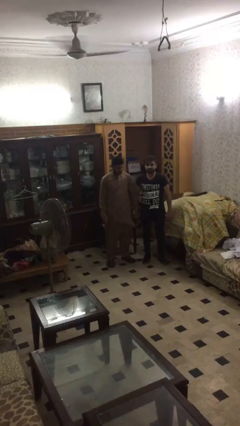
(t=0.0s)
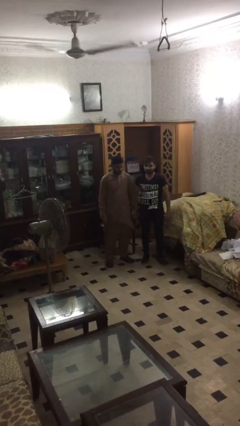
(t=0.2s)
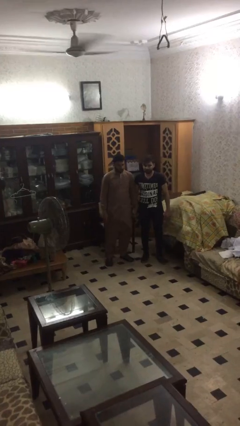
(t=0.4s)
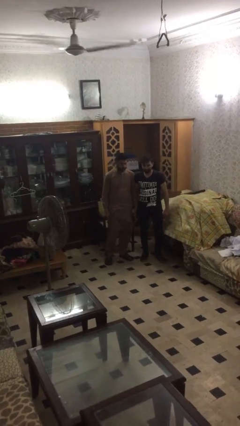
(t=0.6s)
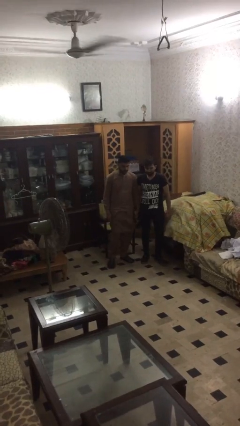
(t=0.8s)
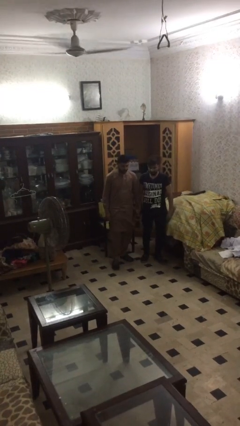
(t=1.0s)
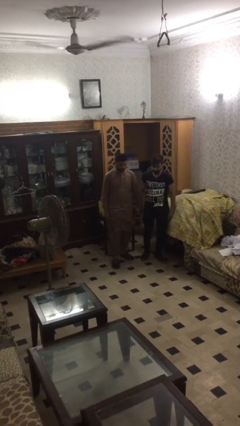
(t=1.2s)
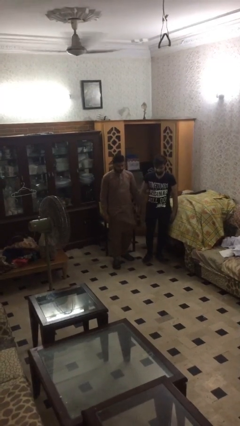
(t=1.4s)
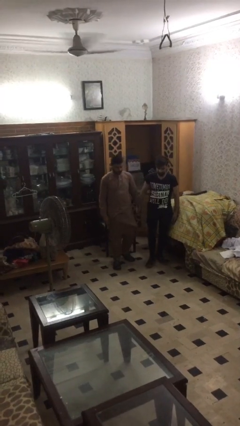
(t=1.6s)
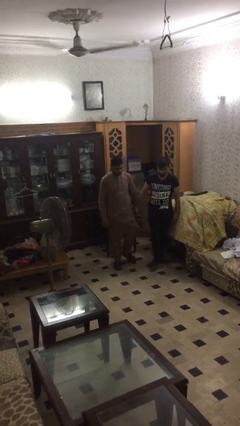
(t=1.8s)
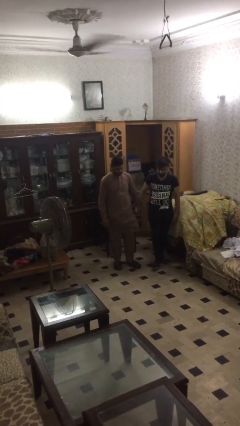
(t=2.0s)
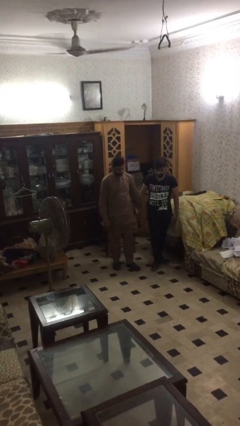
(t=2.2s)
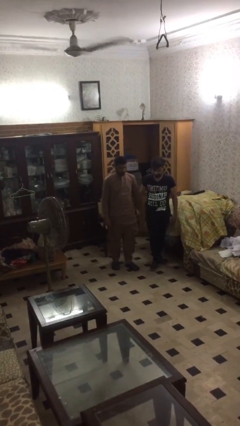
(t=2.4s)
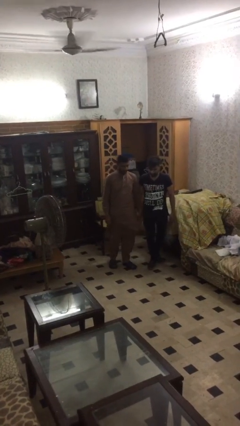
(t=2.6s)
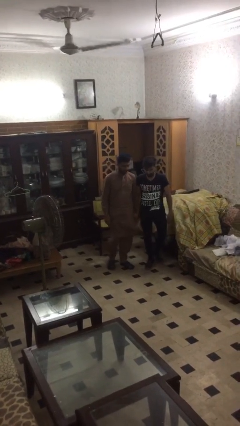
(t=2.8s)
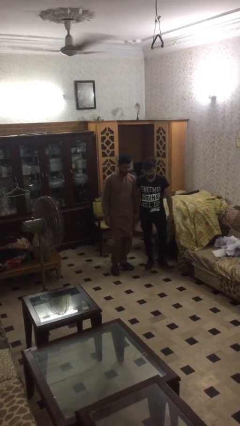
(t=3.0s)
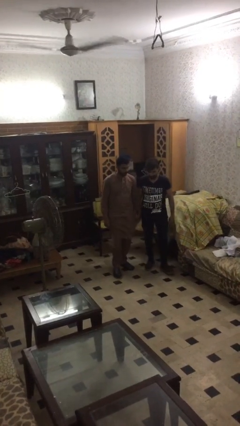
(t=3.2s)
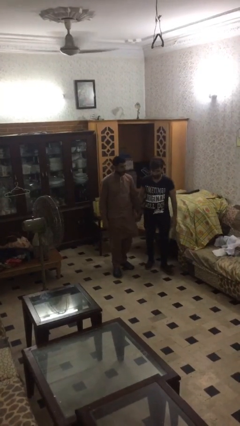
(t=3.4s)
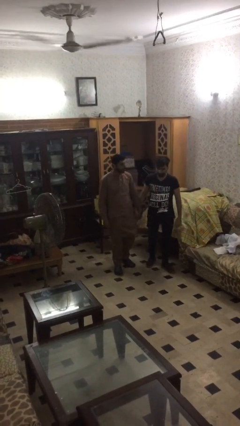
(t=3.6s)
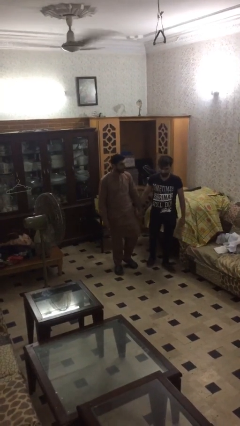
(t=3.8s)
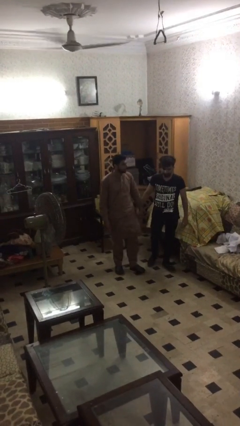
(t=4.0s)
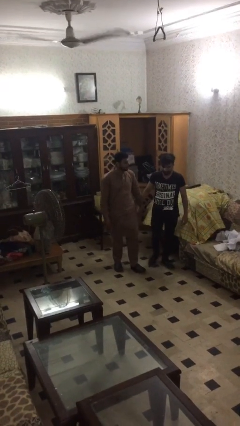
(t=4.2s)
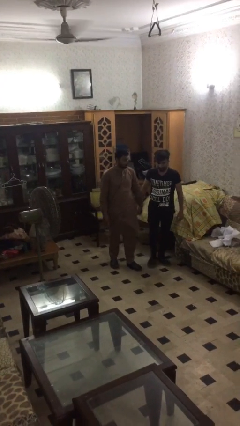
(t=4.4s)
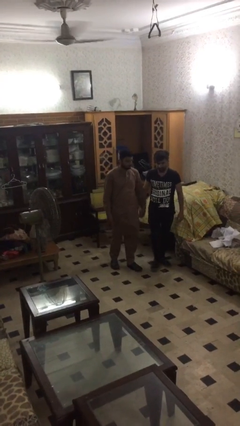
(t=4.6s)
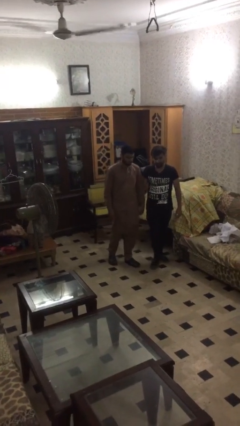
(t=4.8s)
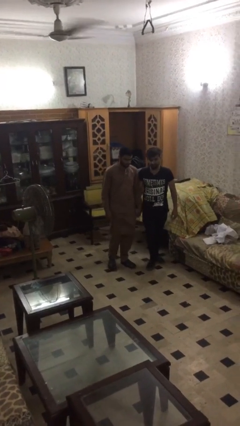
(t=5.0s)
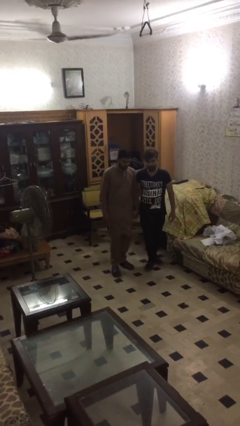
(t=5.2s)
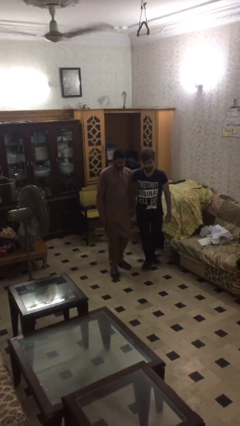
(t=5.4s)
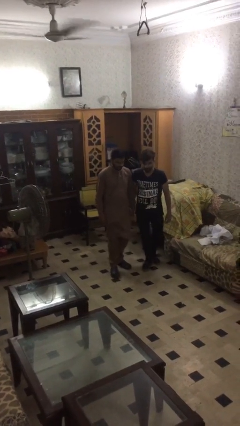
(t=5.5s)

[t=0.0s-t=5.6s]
person holds hand

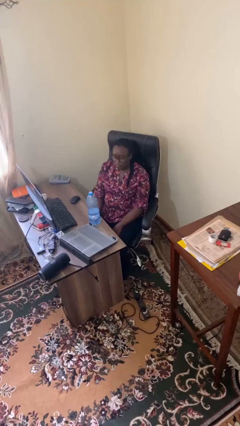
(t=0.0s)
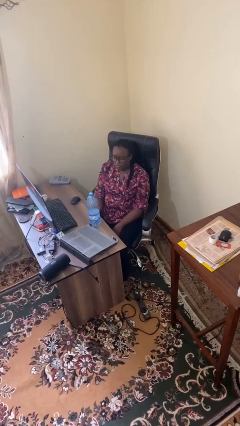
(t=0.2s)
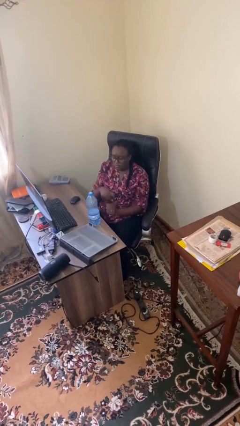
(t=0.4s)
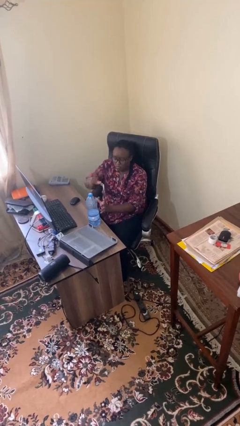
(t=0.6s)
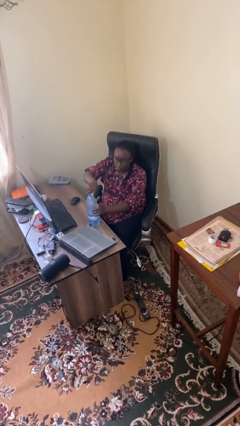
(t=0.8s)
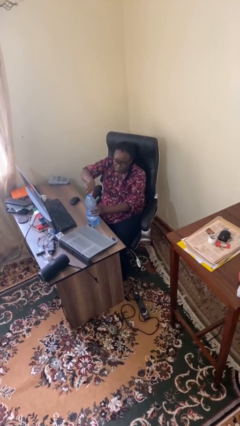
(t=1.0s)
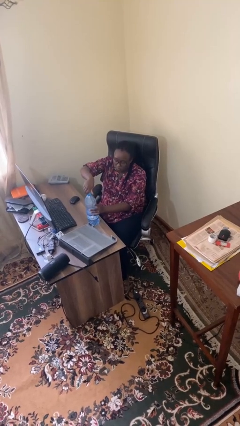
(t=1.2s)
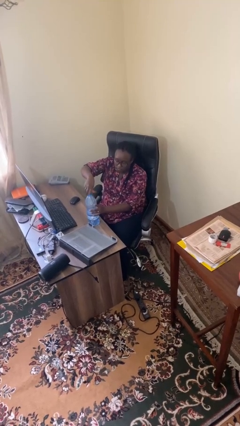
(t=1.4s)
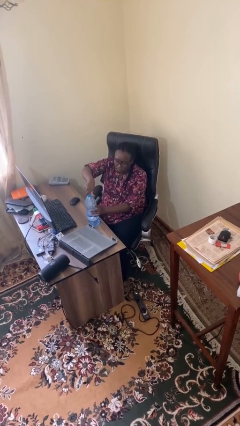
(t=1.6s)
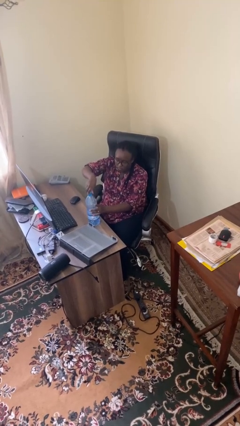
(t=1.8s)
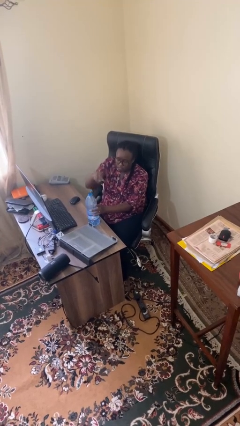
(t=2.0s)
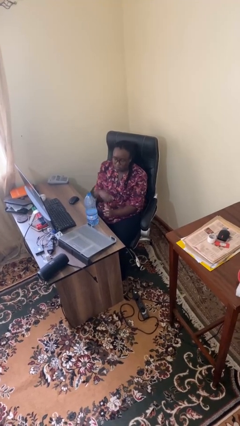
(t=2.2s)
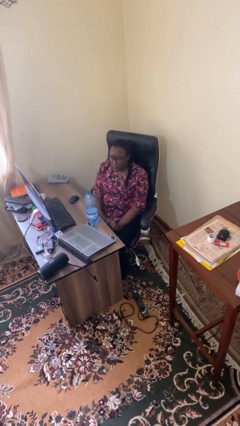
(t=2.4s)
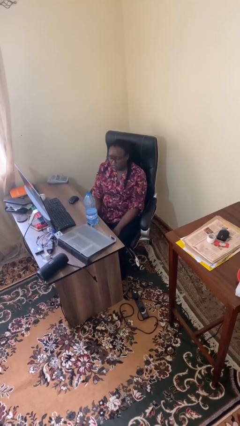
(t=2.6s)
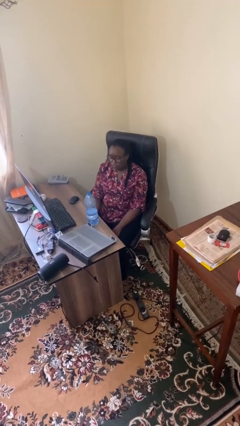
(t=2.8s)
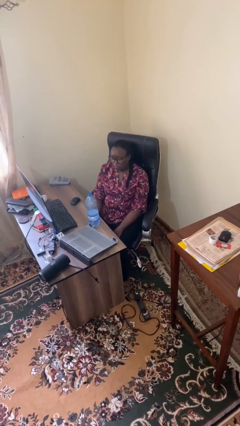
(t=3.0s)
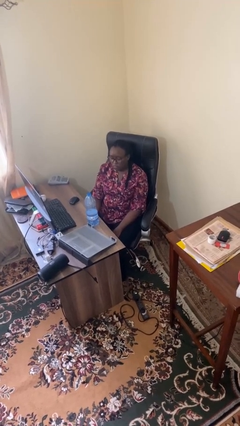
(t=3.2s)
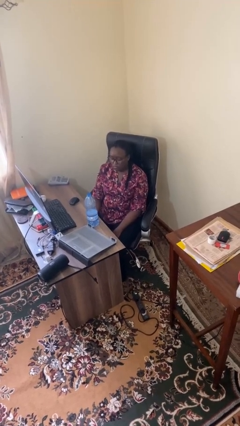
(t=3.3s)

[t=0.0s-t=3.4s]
person unscrews lid from bottle

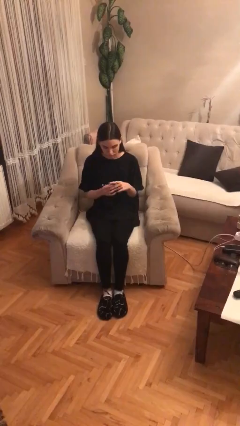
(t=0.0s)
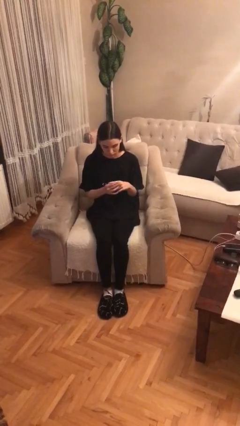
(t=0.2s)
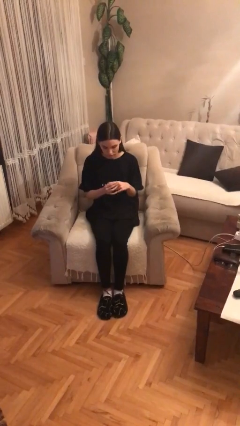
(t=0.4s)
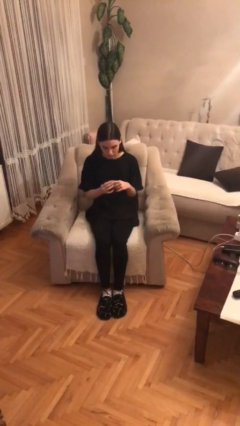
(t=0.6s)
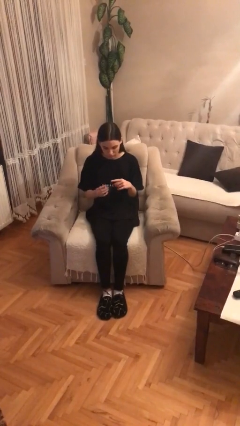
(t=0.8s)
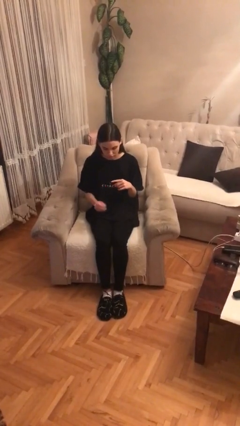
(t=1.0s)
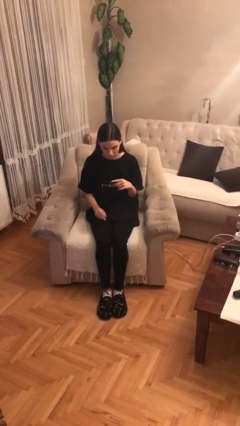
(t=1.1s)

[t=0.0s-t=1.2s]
person takes off ring

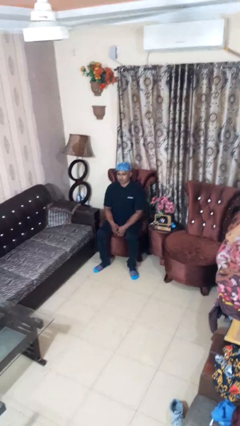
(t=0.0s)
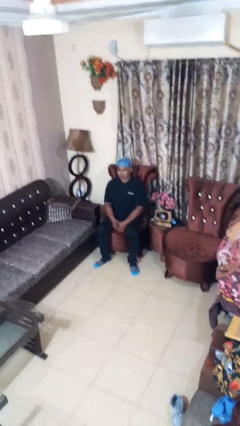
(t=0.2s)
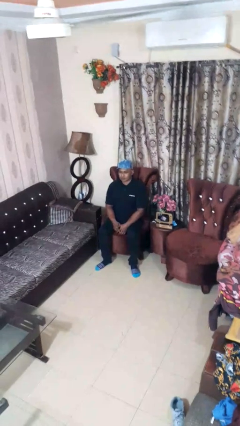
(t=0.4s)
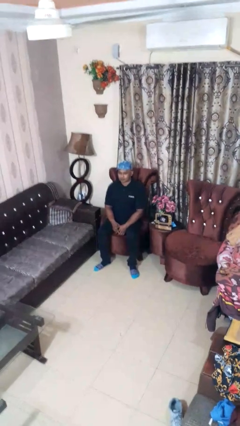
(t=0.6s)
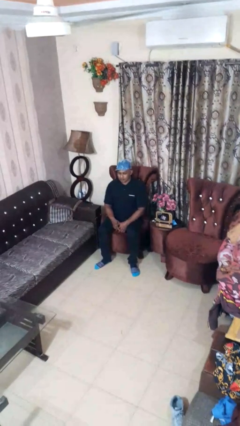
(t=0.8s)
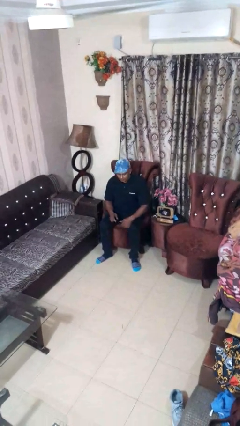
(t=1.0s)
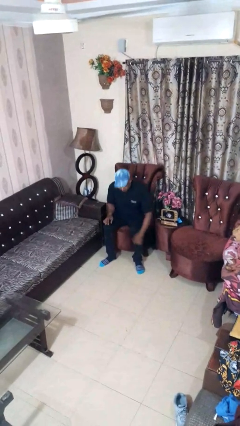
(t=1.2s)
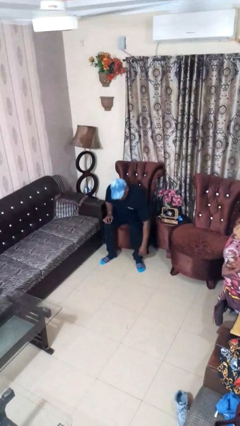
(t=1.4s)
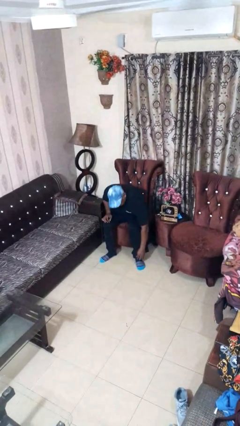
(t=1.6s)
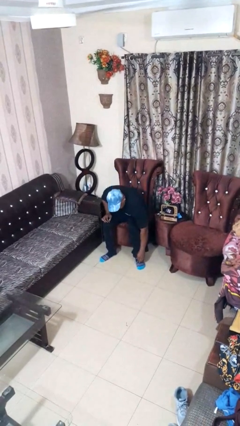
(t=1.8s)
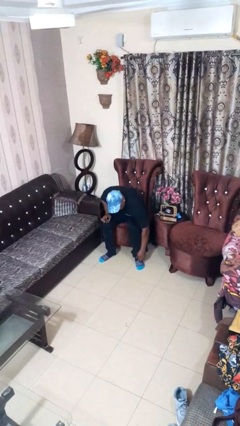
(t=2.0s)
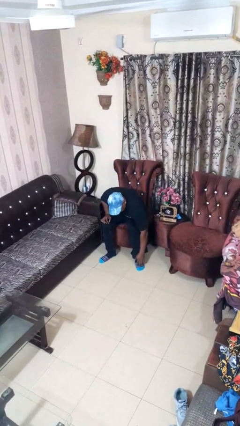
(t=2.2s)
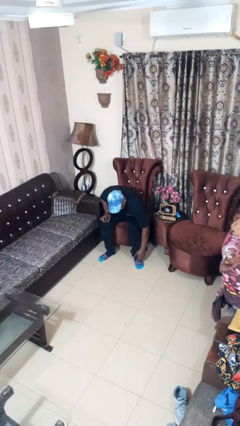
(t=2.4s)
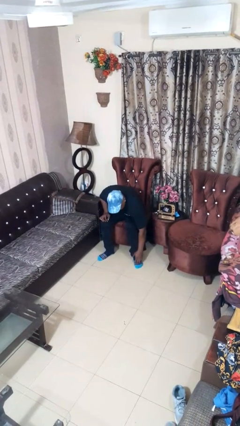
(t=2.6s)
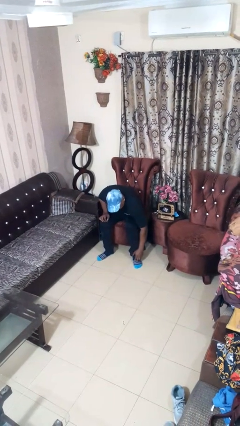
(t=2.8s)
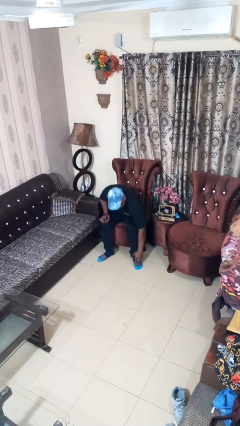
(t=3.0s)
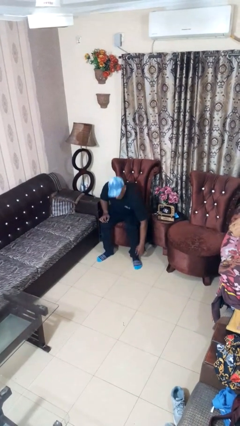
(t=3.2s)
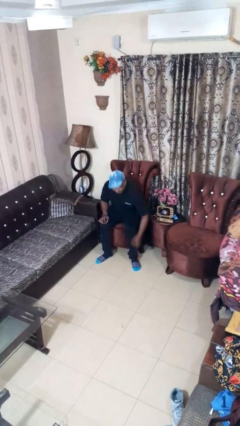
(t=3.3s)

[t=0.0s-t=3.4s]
person rubs foot

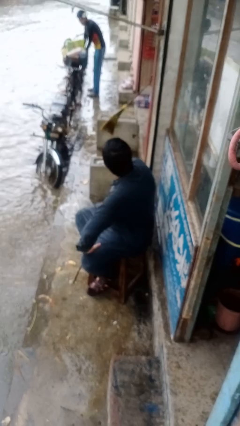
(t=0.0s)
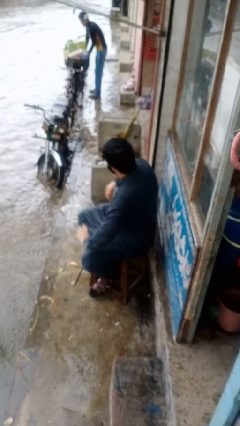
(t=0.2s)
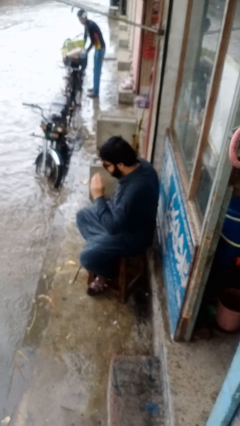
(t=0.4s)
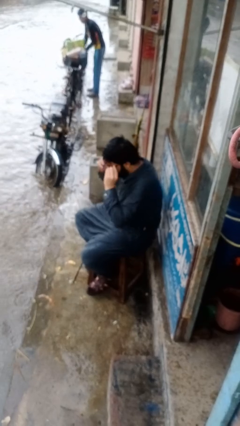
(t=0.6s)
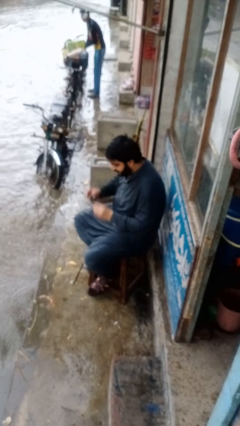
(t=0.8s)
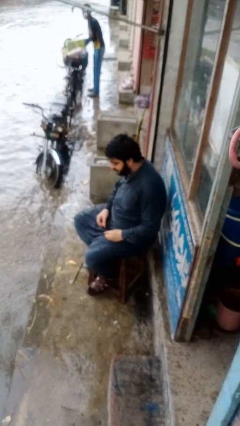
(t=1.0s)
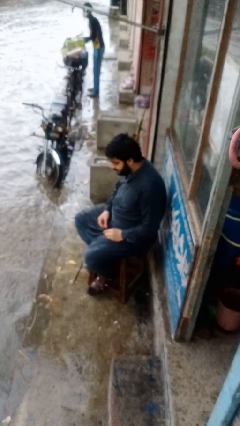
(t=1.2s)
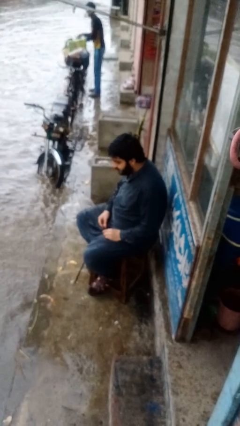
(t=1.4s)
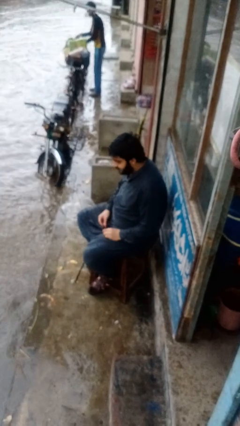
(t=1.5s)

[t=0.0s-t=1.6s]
person takes off glasses

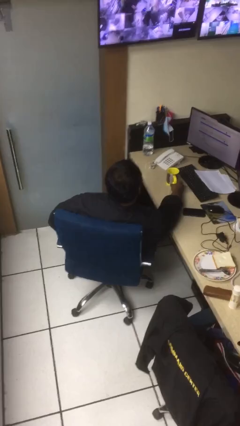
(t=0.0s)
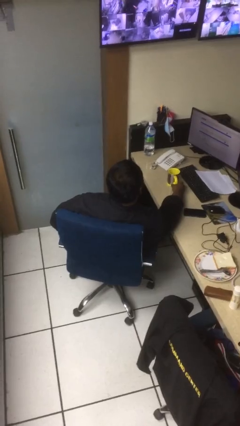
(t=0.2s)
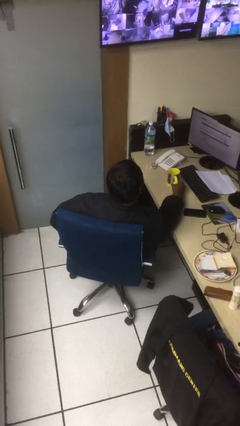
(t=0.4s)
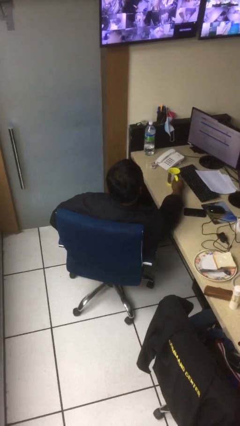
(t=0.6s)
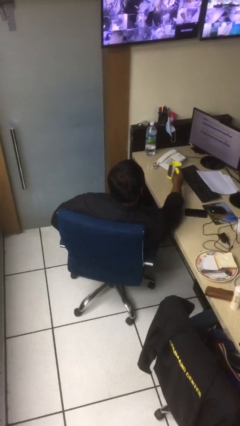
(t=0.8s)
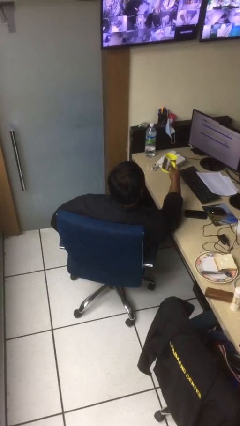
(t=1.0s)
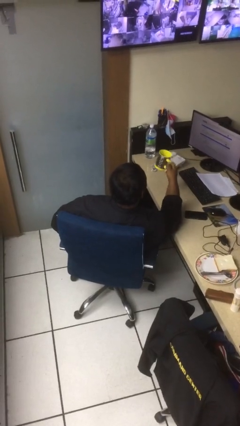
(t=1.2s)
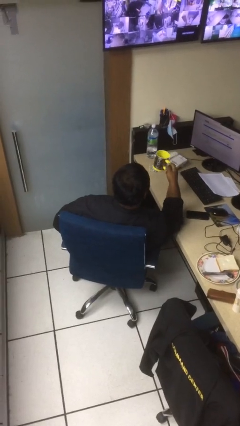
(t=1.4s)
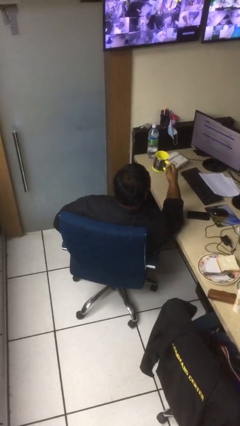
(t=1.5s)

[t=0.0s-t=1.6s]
person picks up object from table
